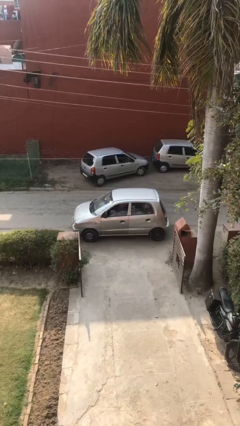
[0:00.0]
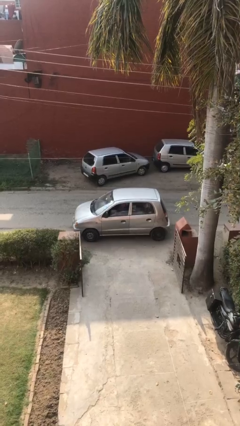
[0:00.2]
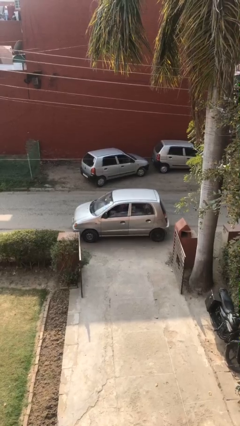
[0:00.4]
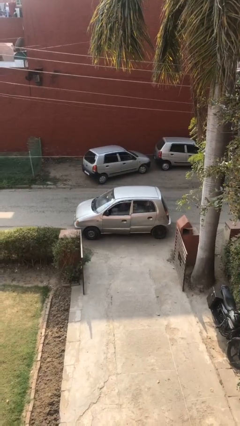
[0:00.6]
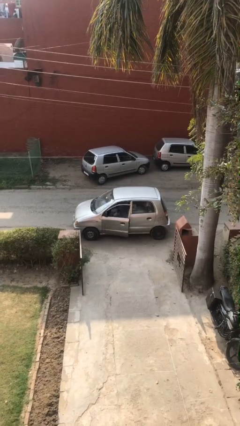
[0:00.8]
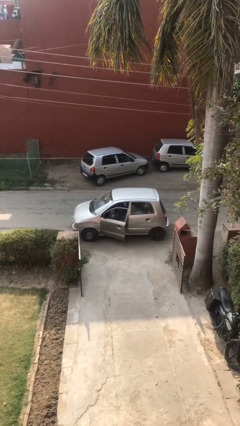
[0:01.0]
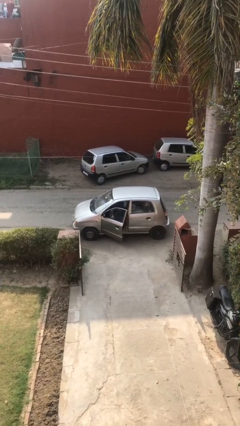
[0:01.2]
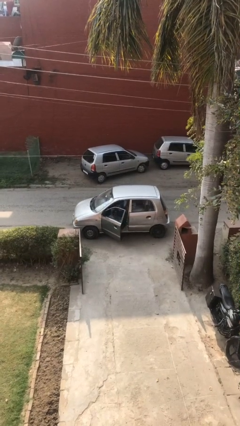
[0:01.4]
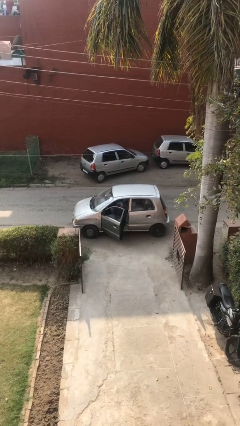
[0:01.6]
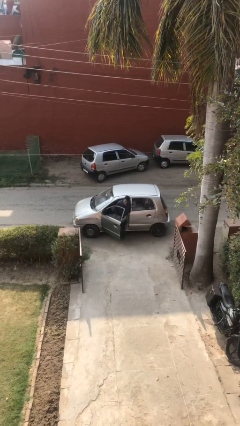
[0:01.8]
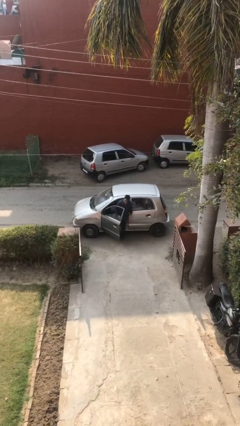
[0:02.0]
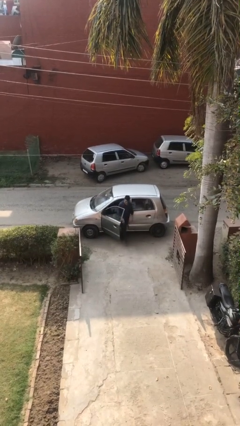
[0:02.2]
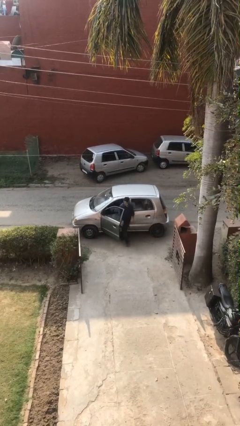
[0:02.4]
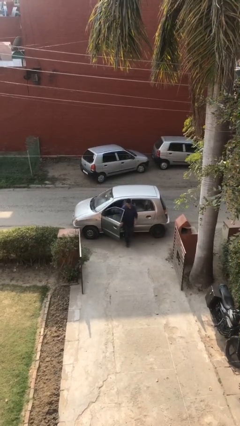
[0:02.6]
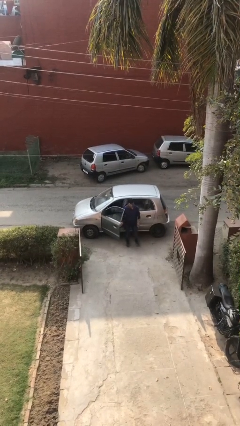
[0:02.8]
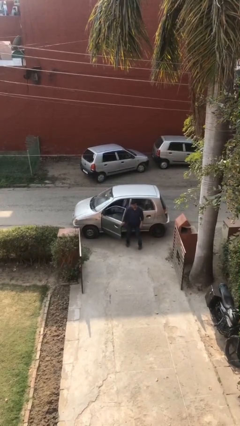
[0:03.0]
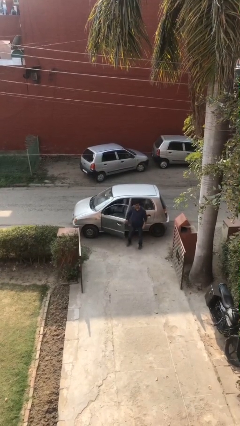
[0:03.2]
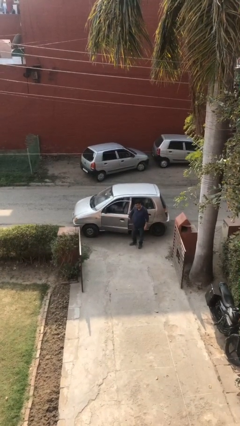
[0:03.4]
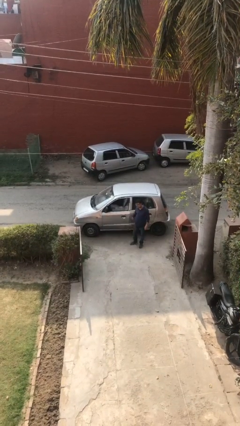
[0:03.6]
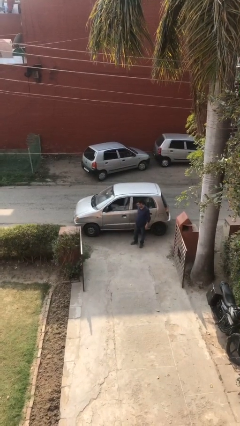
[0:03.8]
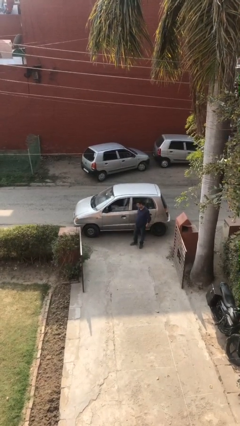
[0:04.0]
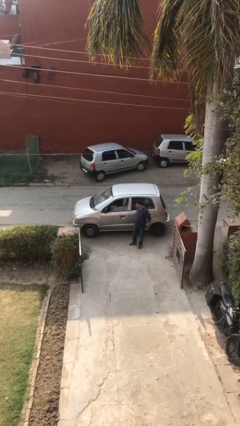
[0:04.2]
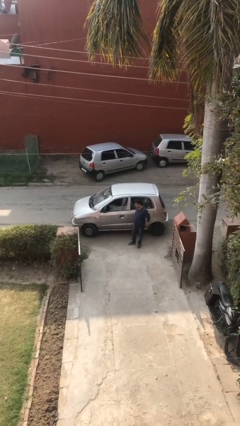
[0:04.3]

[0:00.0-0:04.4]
car drops off person

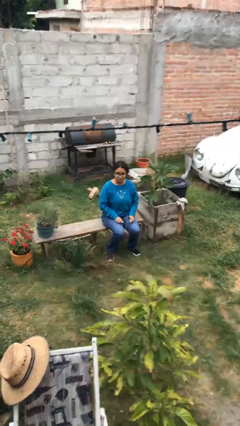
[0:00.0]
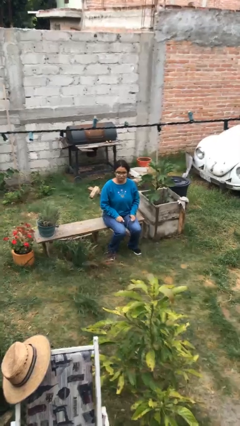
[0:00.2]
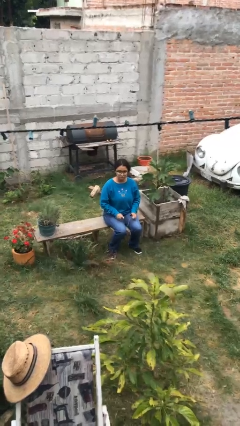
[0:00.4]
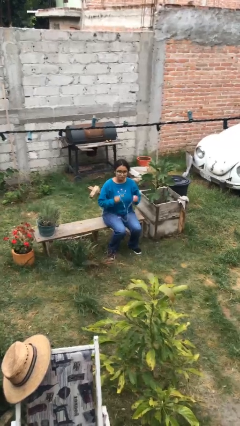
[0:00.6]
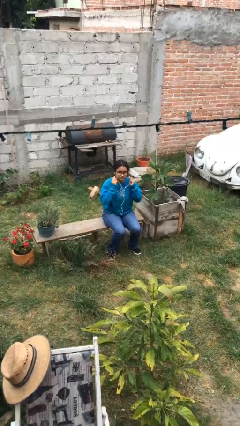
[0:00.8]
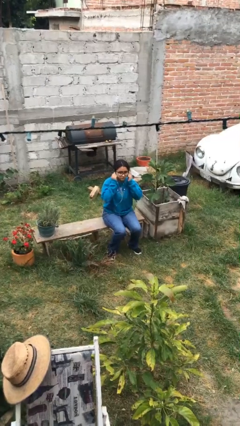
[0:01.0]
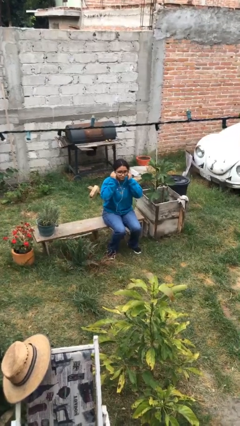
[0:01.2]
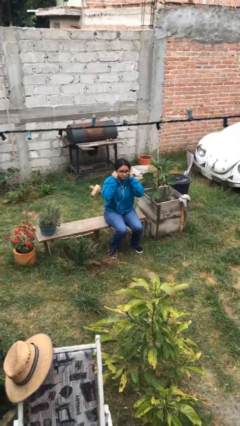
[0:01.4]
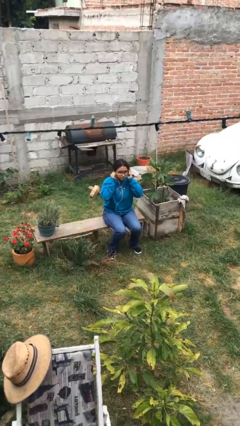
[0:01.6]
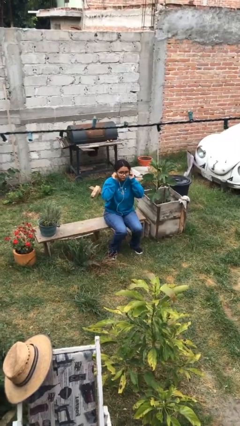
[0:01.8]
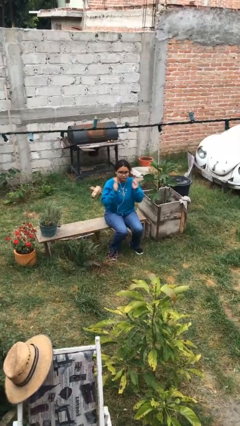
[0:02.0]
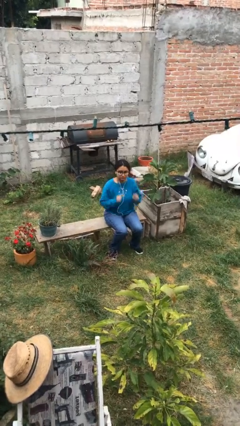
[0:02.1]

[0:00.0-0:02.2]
person puts on headphones

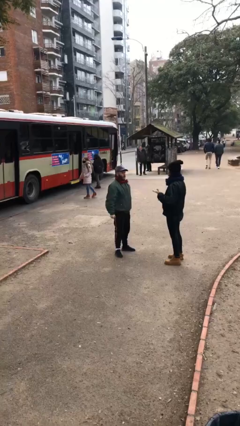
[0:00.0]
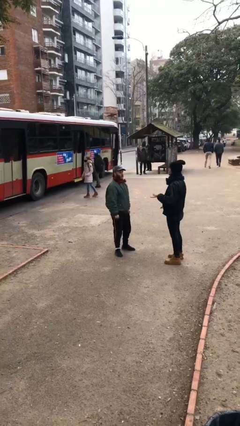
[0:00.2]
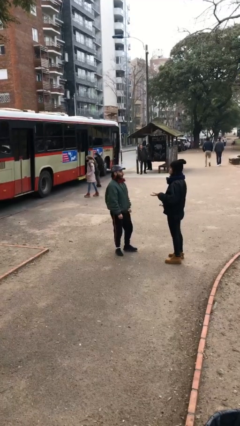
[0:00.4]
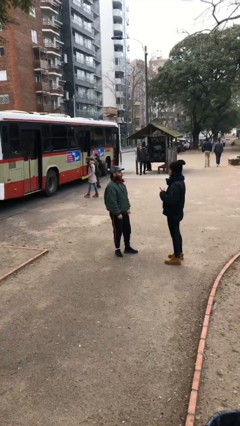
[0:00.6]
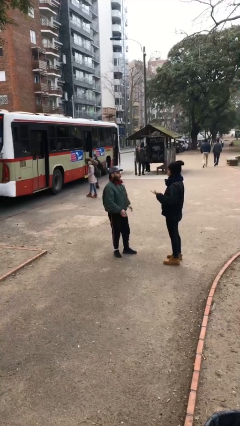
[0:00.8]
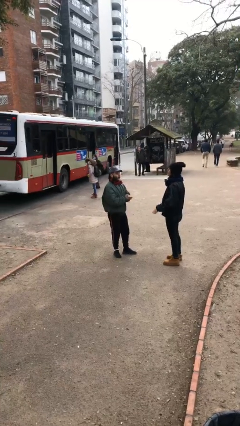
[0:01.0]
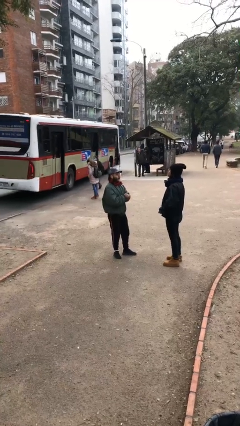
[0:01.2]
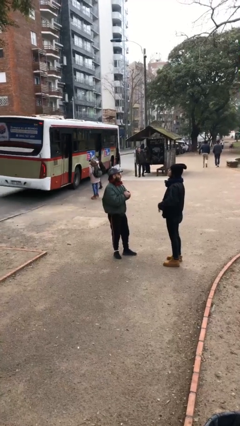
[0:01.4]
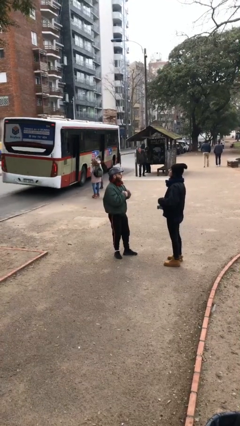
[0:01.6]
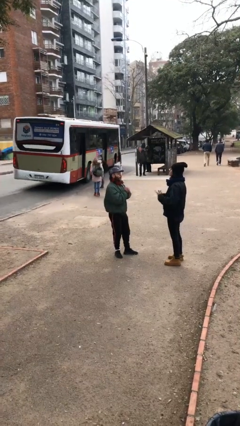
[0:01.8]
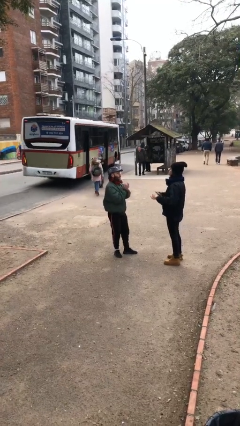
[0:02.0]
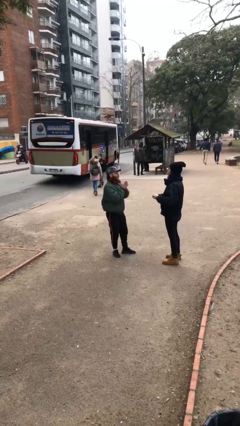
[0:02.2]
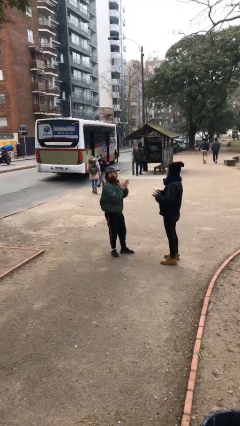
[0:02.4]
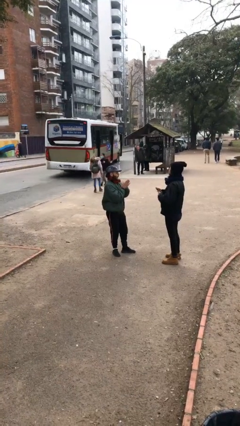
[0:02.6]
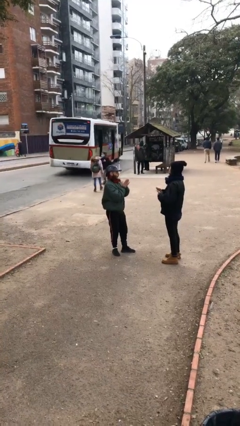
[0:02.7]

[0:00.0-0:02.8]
person talks to person

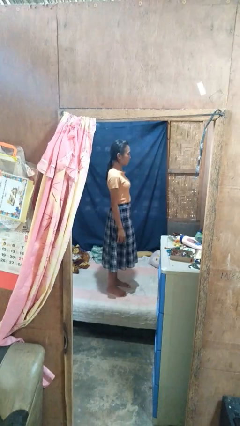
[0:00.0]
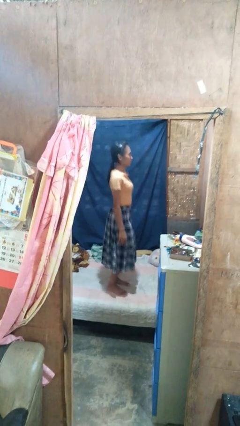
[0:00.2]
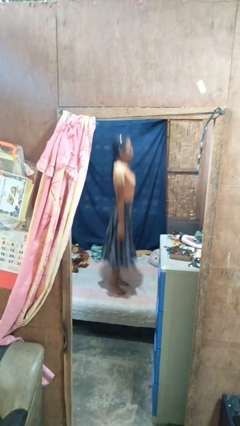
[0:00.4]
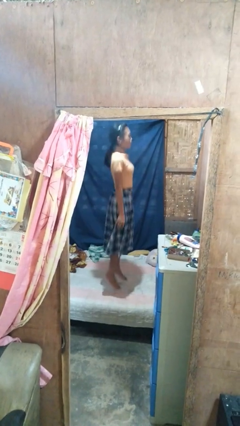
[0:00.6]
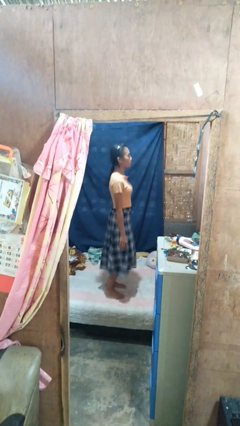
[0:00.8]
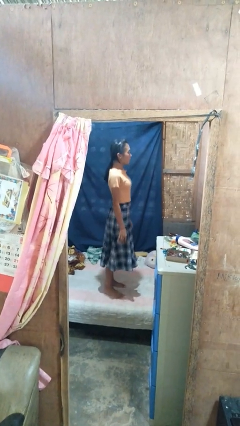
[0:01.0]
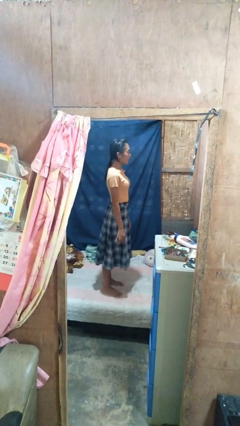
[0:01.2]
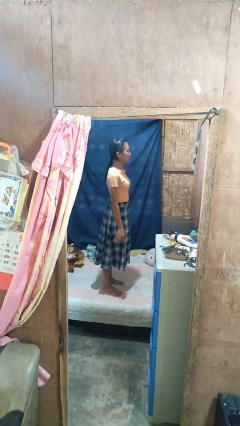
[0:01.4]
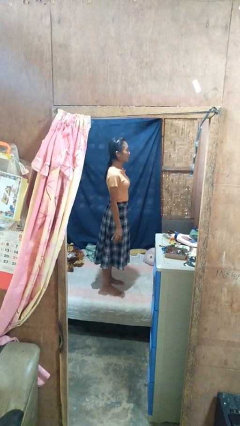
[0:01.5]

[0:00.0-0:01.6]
person jumps on bed

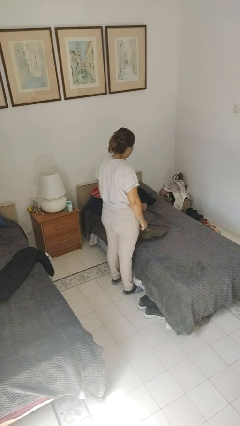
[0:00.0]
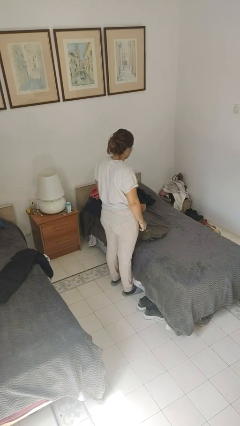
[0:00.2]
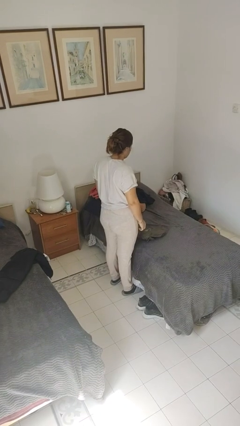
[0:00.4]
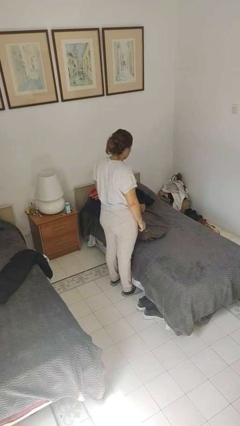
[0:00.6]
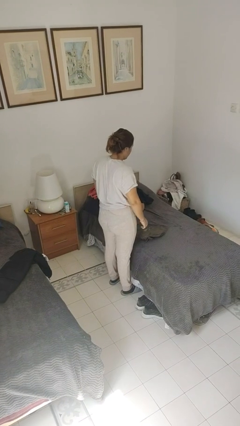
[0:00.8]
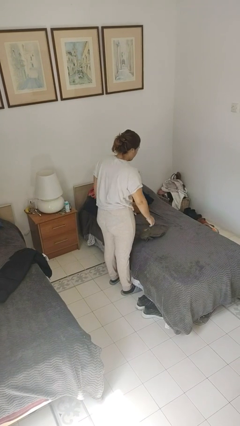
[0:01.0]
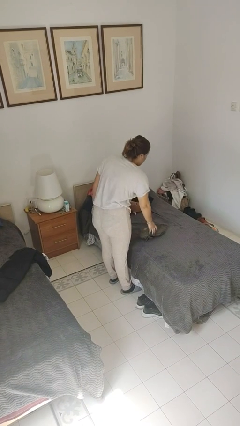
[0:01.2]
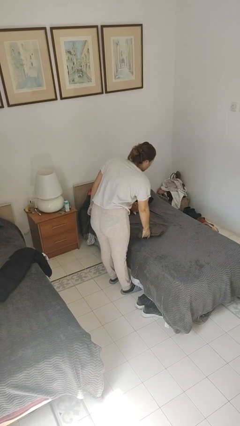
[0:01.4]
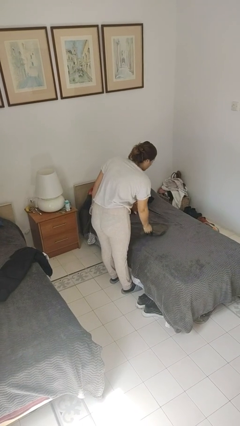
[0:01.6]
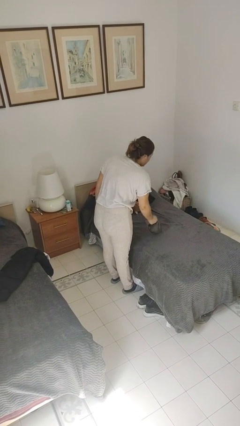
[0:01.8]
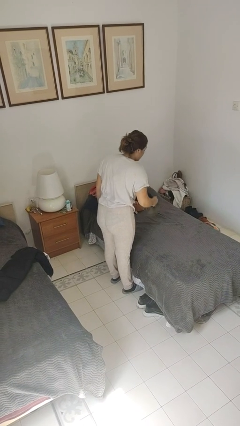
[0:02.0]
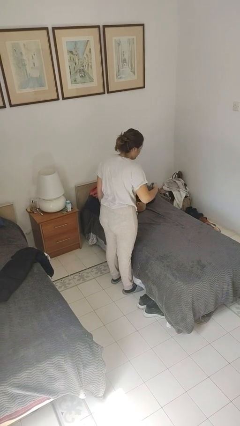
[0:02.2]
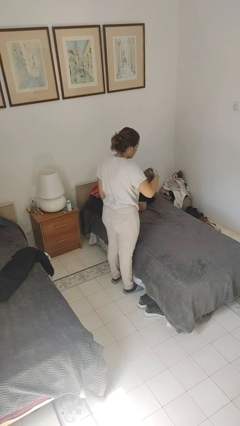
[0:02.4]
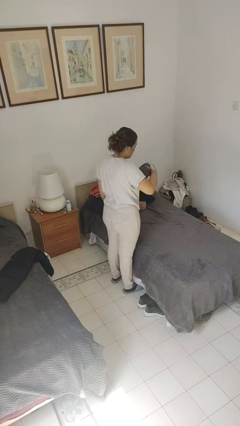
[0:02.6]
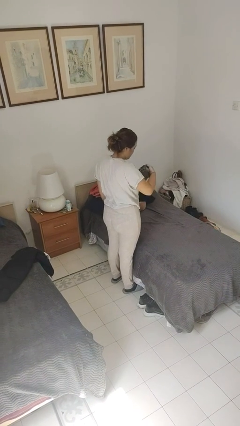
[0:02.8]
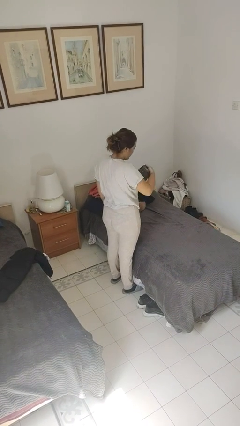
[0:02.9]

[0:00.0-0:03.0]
person picks up object from bed

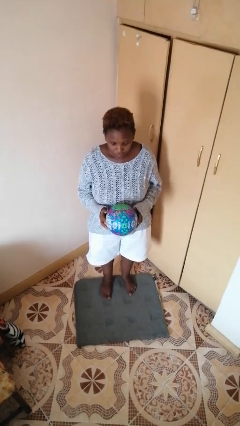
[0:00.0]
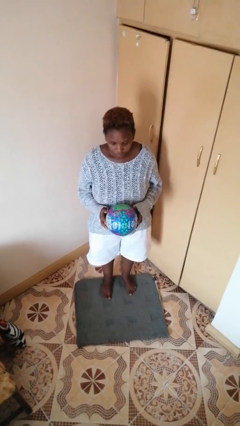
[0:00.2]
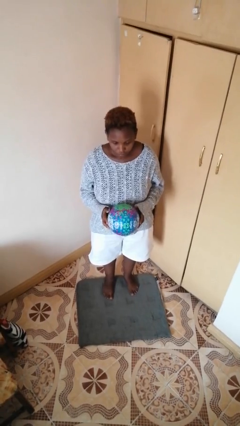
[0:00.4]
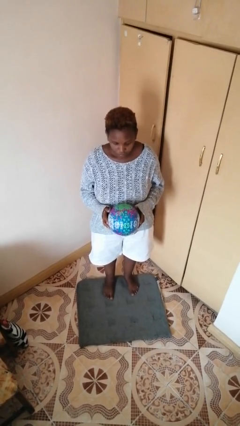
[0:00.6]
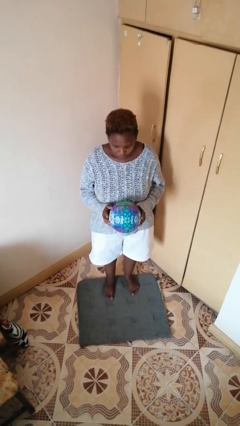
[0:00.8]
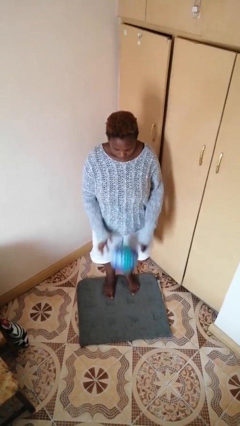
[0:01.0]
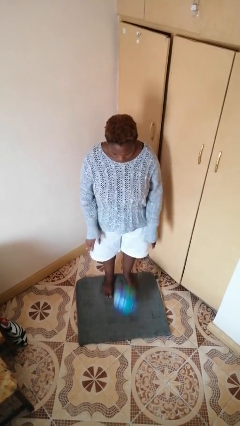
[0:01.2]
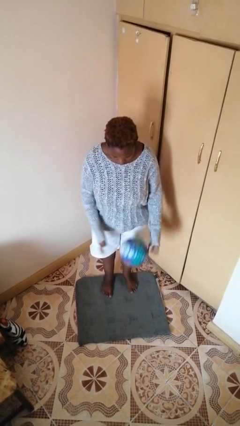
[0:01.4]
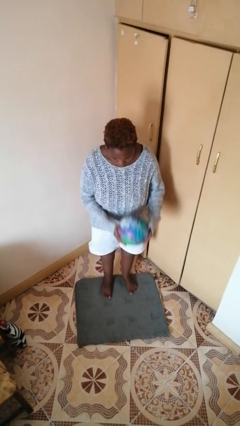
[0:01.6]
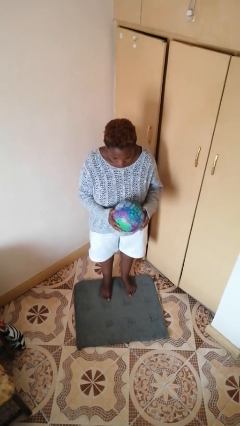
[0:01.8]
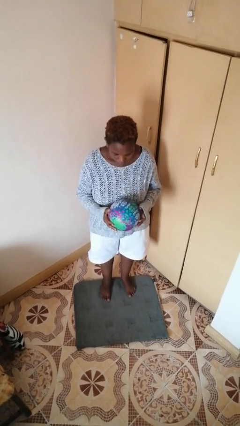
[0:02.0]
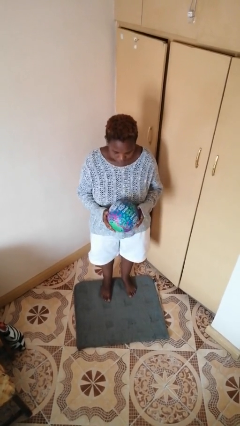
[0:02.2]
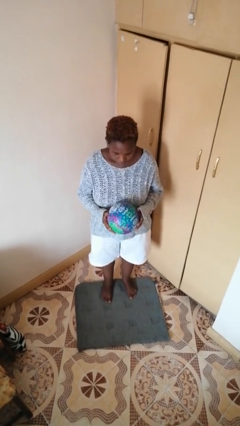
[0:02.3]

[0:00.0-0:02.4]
person bounces ball on floor

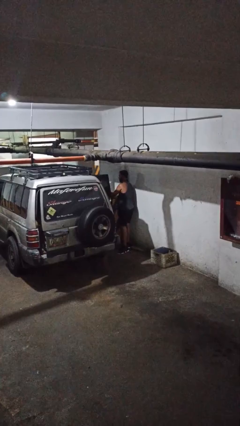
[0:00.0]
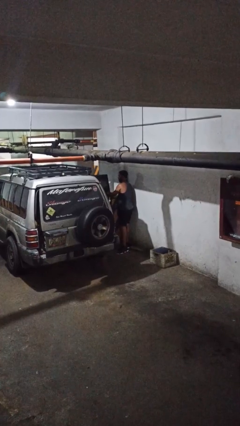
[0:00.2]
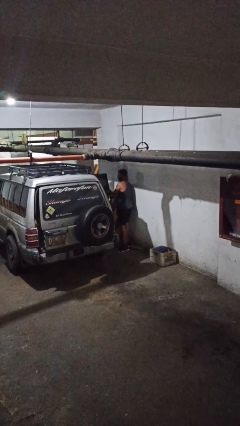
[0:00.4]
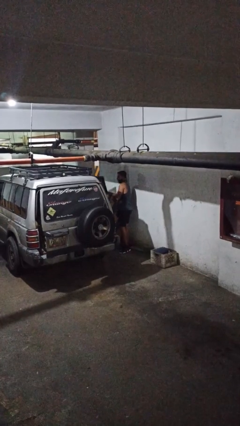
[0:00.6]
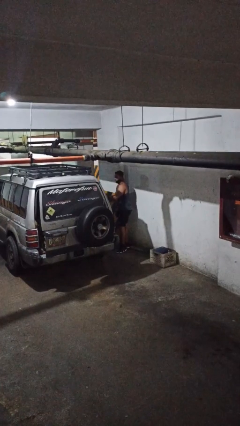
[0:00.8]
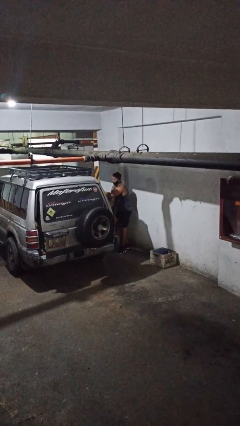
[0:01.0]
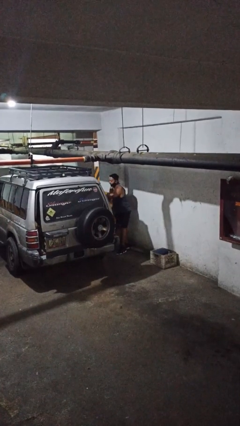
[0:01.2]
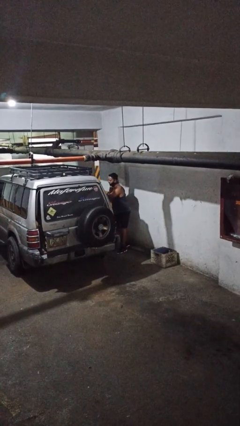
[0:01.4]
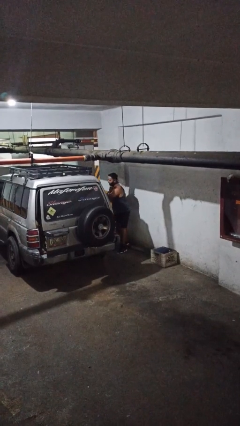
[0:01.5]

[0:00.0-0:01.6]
person closes car door
